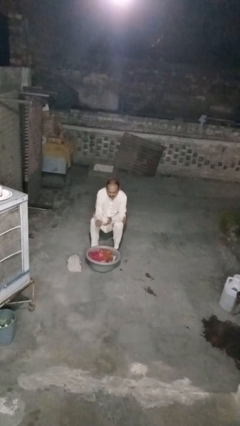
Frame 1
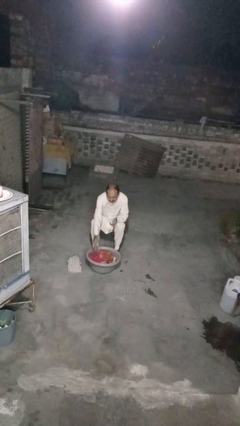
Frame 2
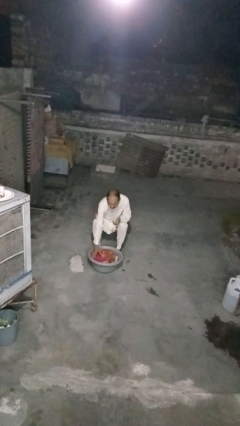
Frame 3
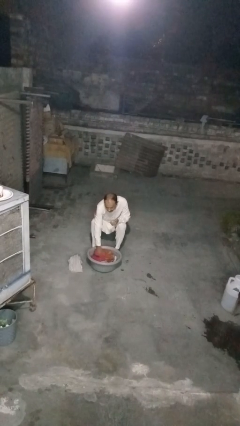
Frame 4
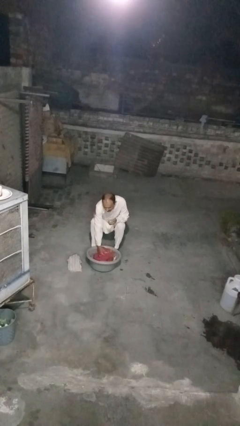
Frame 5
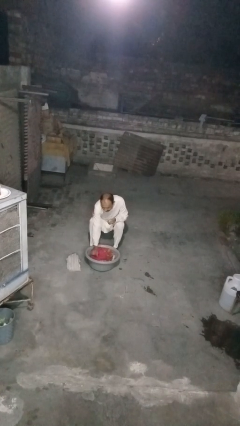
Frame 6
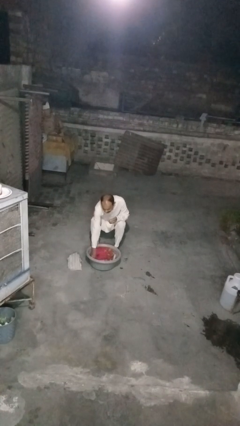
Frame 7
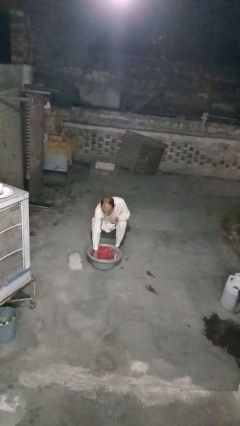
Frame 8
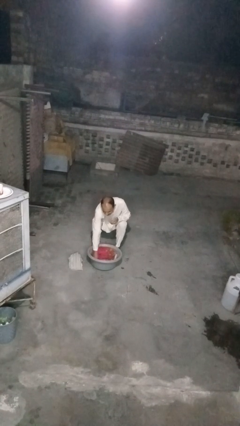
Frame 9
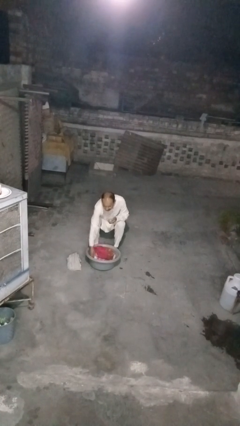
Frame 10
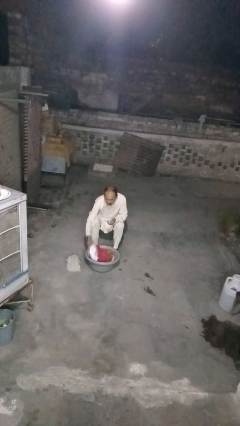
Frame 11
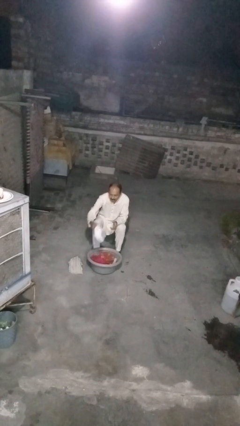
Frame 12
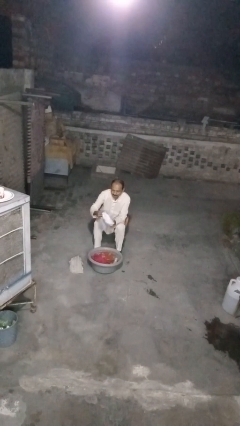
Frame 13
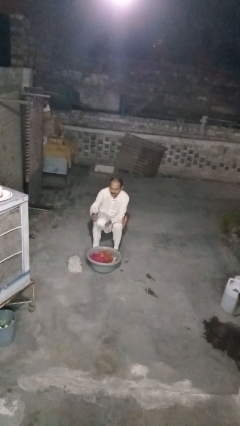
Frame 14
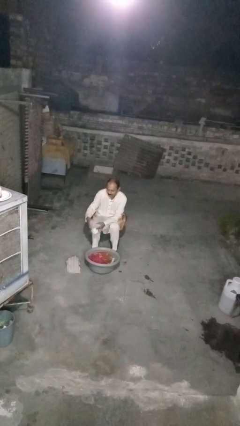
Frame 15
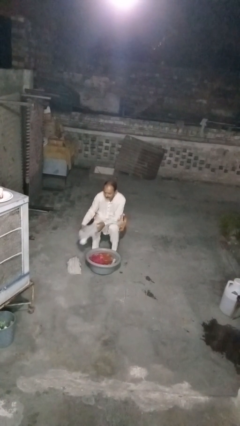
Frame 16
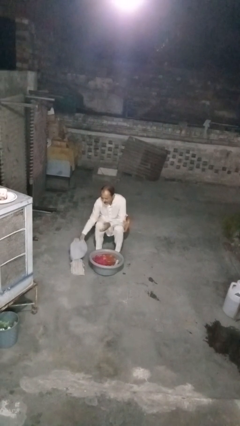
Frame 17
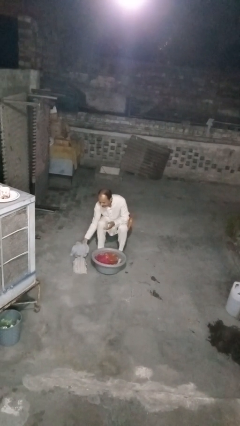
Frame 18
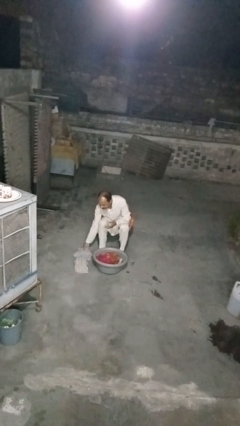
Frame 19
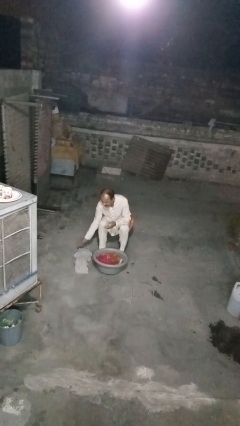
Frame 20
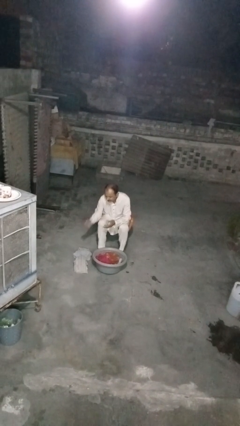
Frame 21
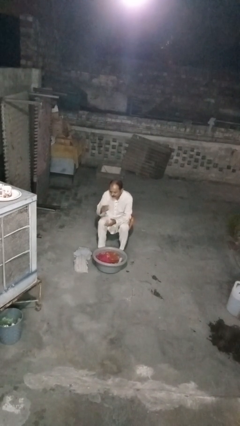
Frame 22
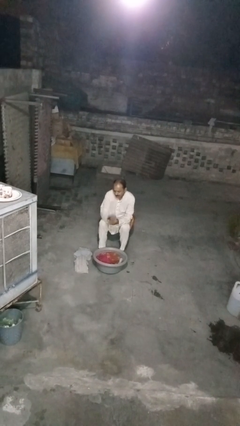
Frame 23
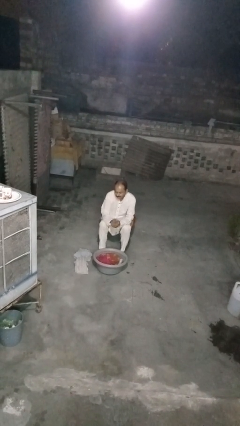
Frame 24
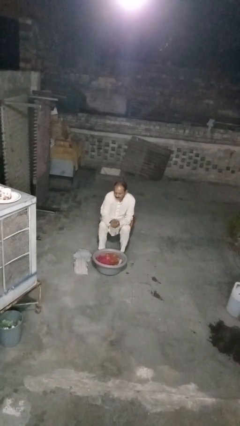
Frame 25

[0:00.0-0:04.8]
person takes object from basket

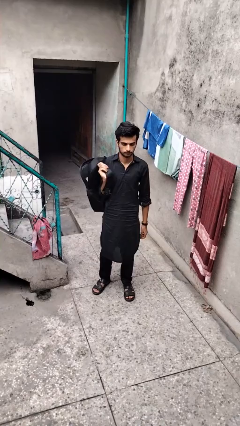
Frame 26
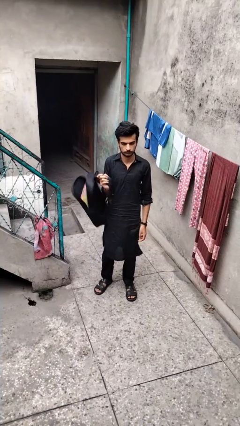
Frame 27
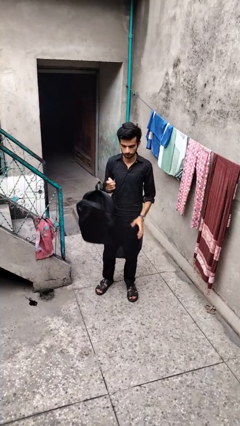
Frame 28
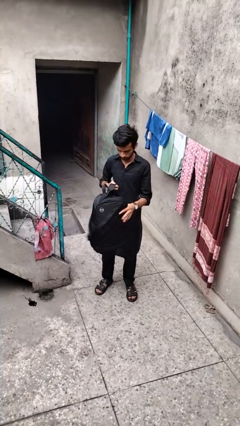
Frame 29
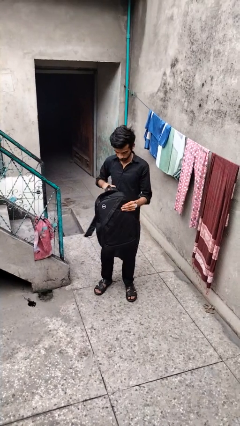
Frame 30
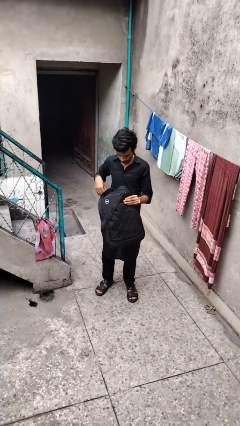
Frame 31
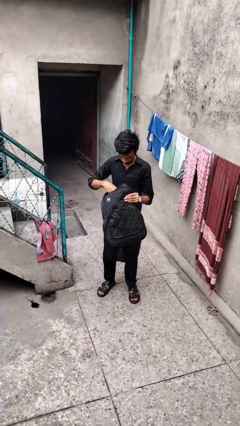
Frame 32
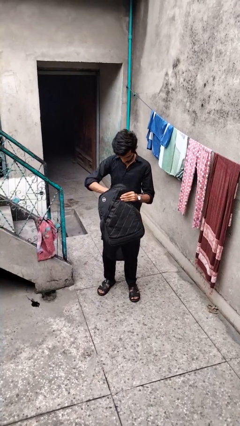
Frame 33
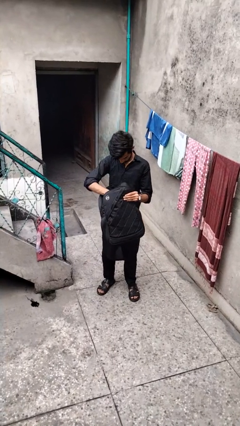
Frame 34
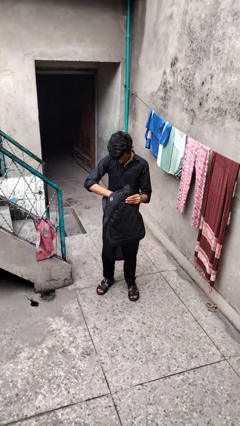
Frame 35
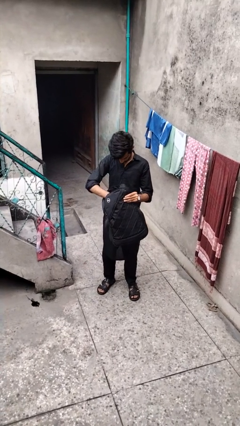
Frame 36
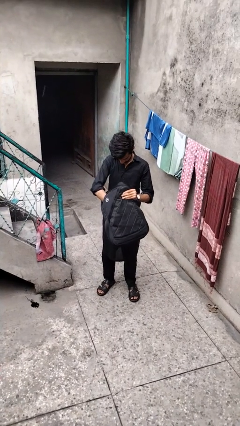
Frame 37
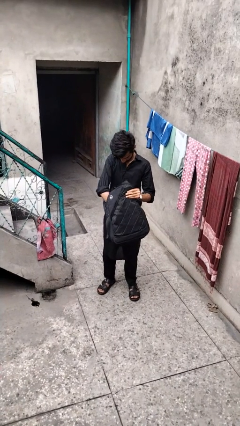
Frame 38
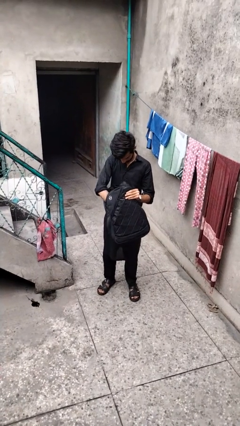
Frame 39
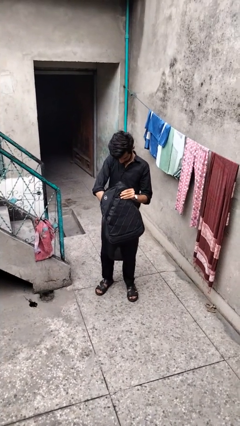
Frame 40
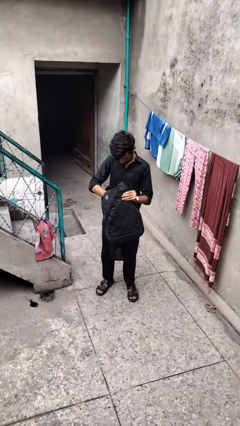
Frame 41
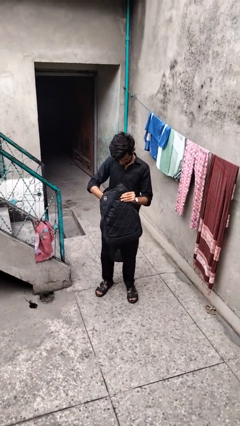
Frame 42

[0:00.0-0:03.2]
person searches in backpack

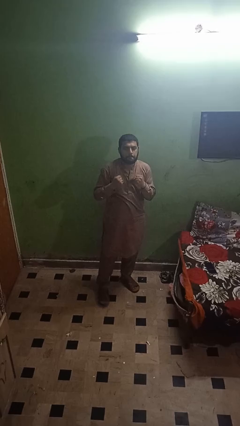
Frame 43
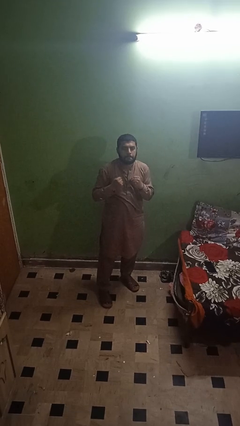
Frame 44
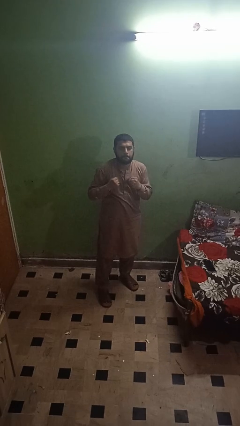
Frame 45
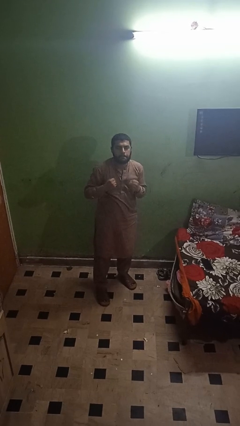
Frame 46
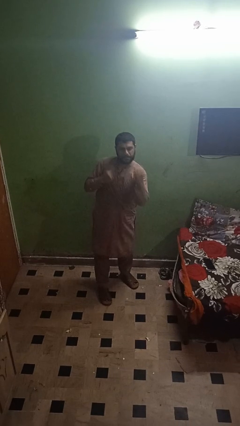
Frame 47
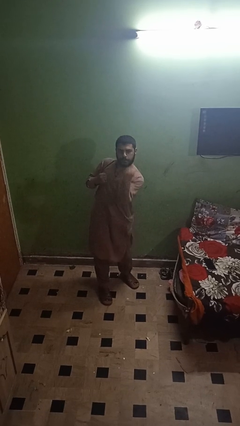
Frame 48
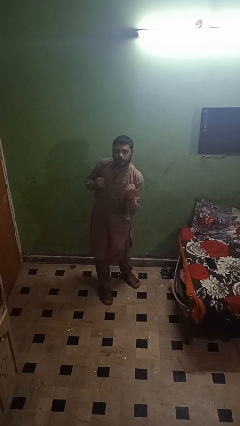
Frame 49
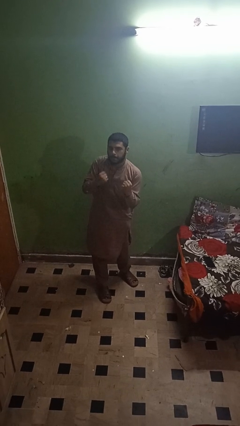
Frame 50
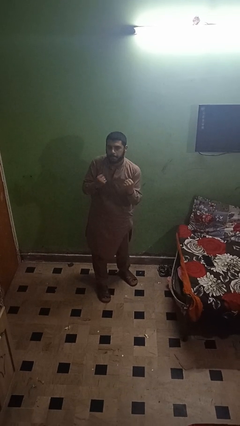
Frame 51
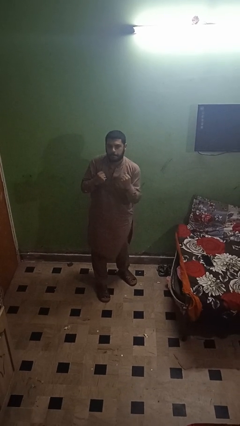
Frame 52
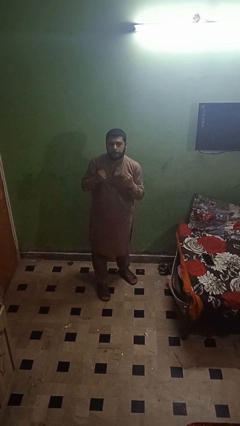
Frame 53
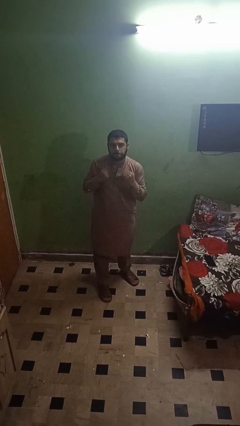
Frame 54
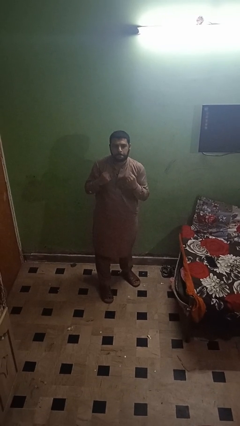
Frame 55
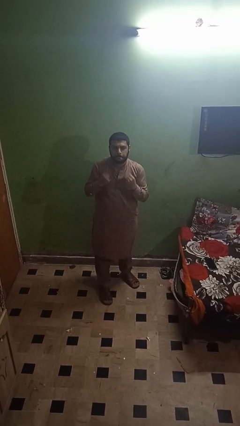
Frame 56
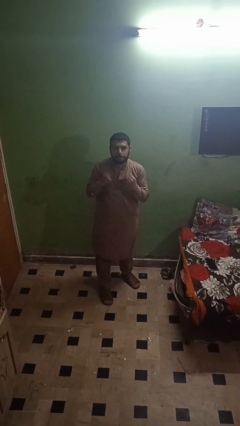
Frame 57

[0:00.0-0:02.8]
person punches

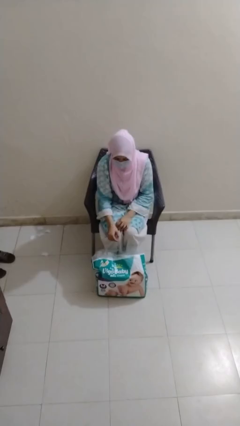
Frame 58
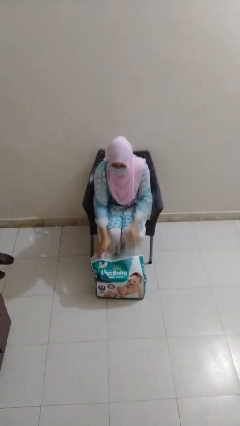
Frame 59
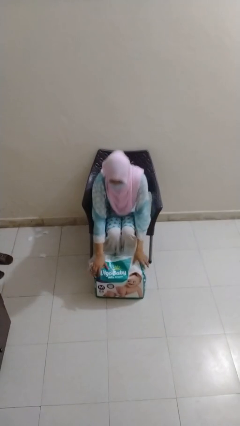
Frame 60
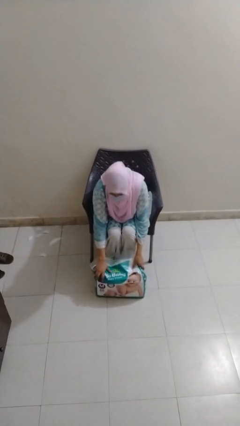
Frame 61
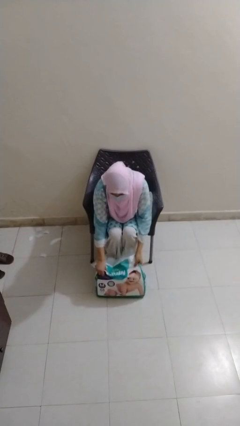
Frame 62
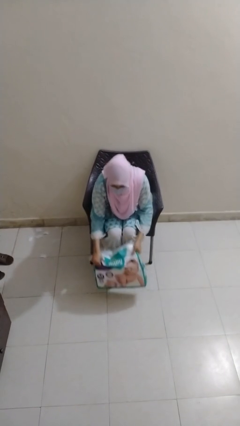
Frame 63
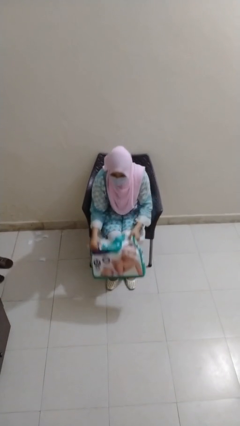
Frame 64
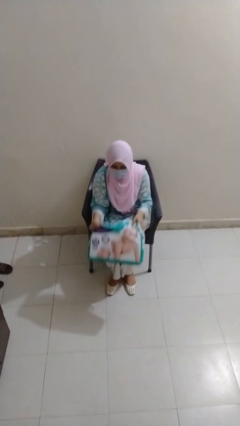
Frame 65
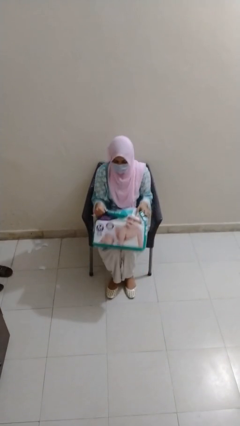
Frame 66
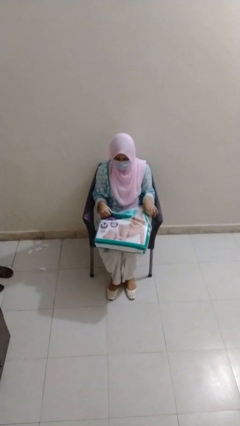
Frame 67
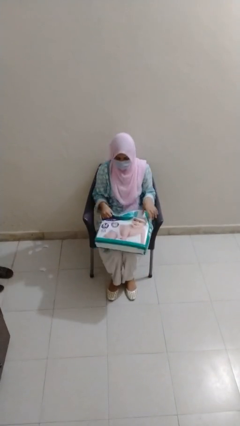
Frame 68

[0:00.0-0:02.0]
person picks up object from floor

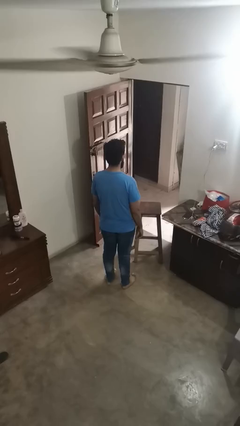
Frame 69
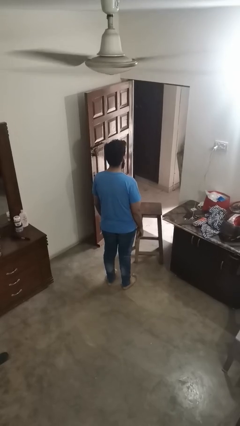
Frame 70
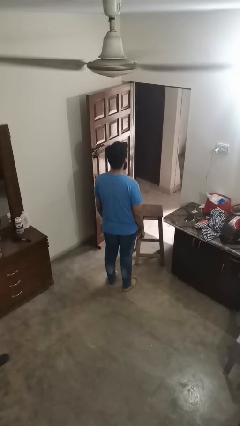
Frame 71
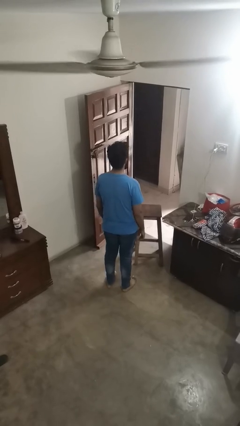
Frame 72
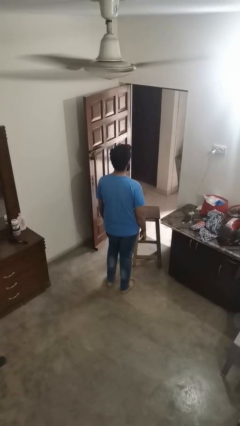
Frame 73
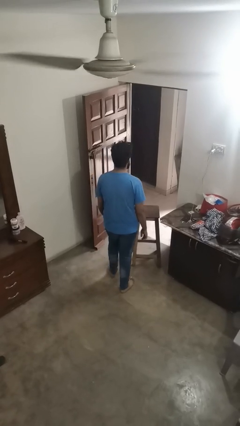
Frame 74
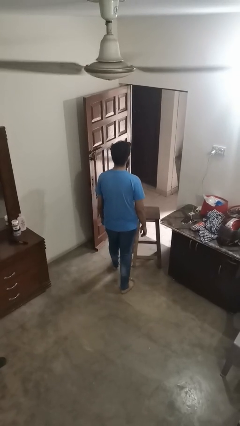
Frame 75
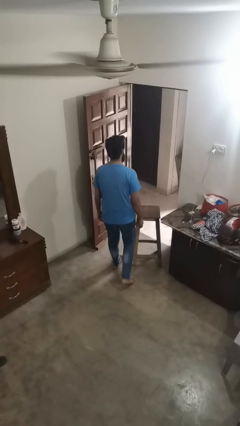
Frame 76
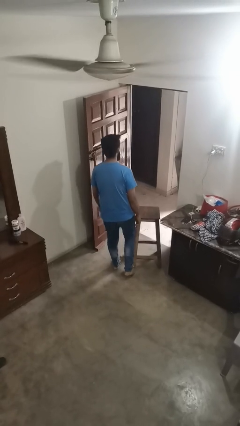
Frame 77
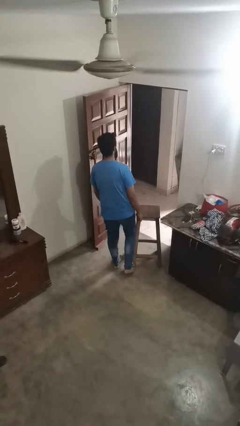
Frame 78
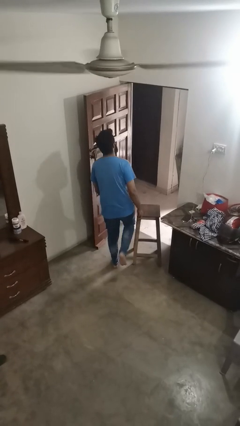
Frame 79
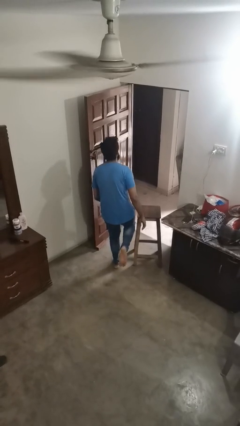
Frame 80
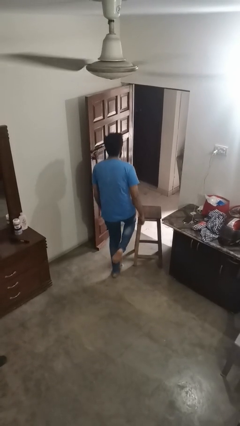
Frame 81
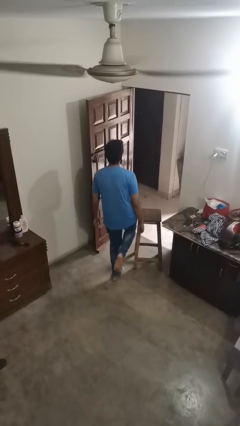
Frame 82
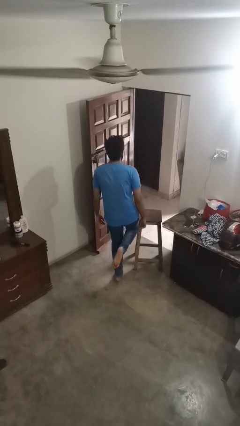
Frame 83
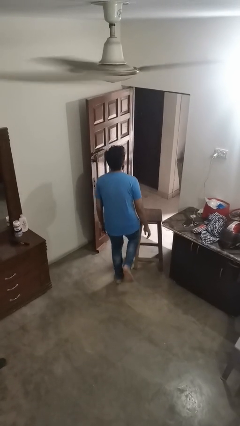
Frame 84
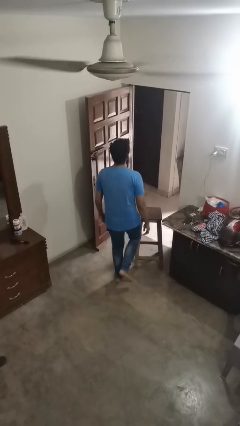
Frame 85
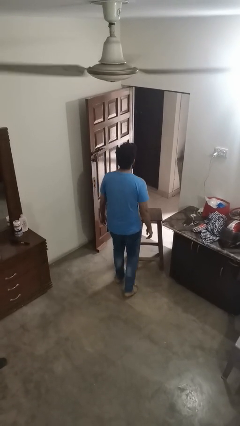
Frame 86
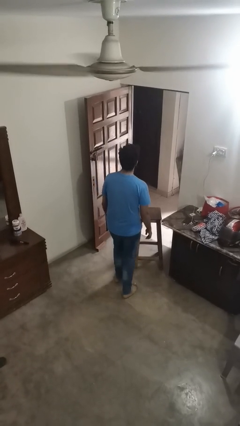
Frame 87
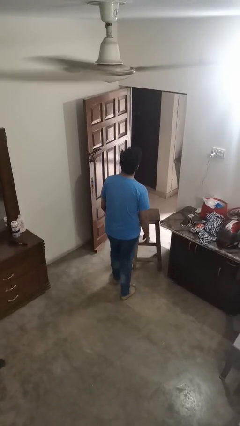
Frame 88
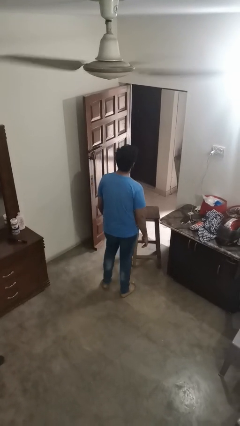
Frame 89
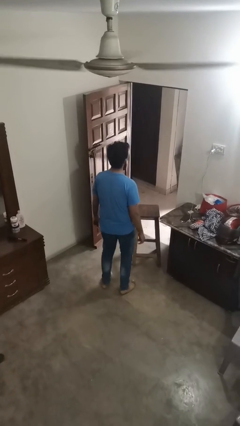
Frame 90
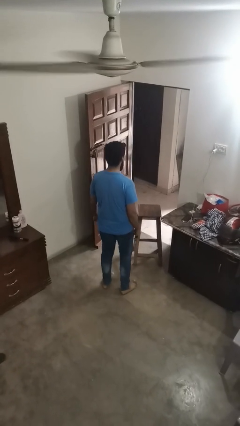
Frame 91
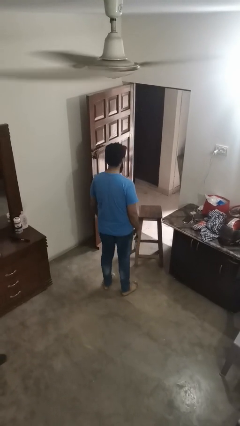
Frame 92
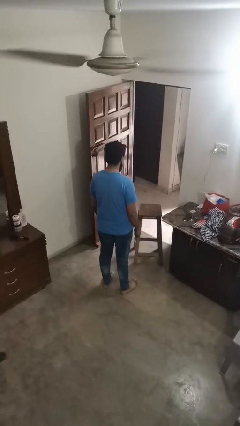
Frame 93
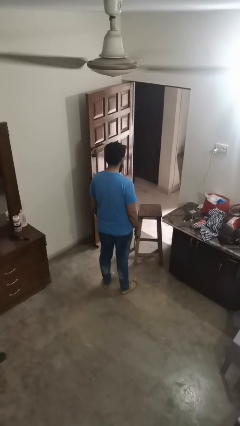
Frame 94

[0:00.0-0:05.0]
person stubs toe
